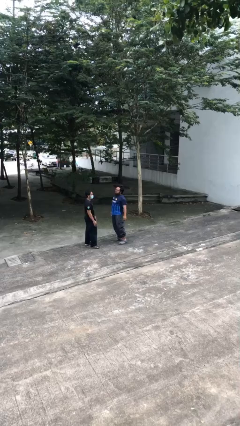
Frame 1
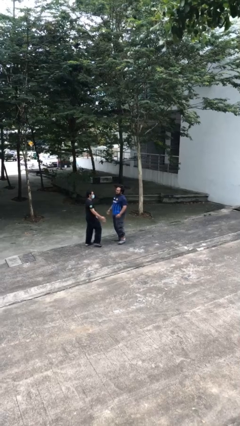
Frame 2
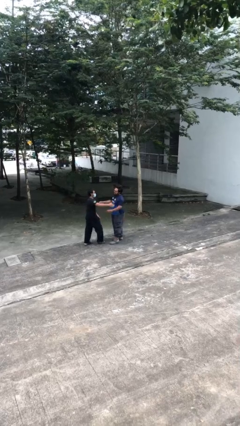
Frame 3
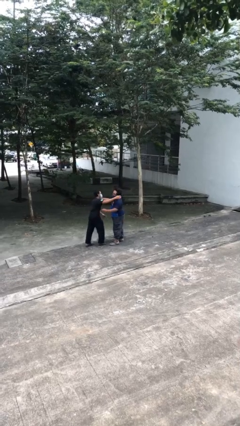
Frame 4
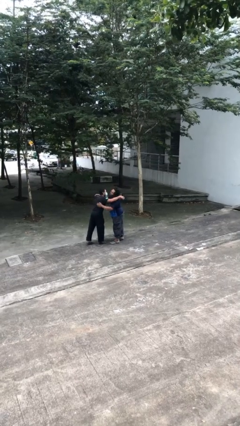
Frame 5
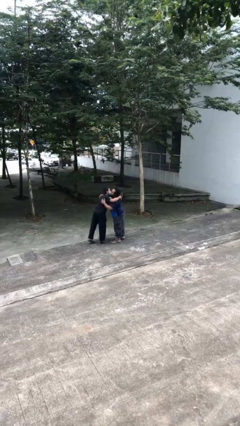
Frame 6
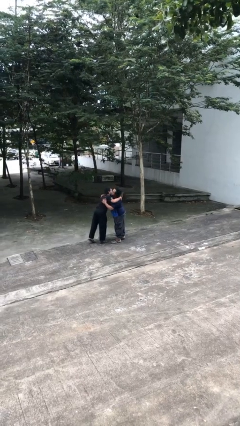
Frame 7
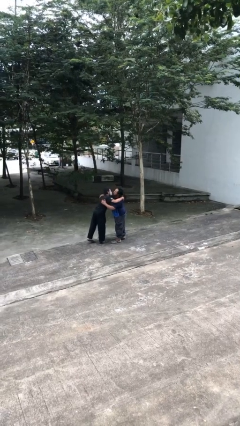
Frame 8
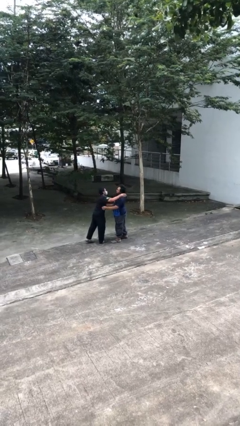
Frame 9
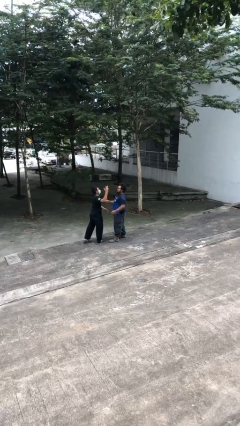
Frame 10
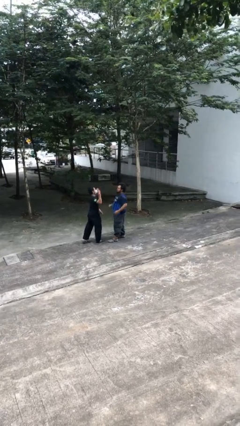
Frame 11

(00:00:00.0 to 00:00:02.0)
person embraces person

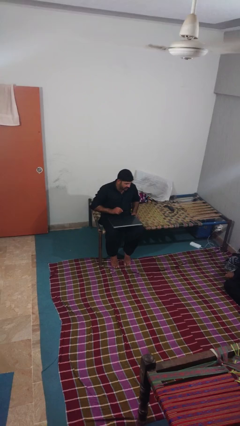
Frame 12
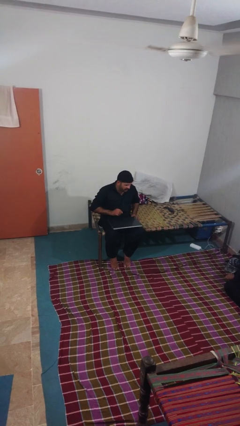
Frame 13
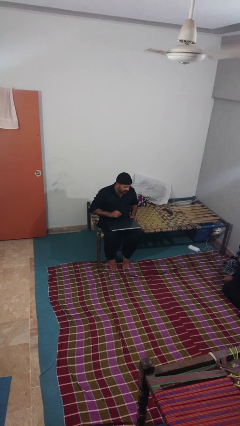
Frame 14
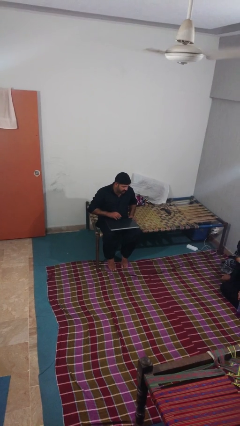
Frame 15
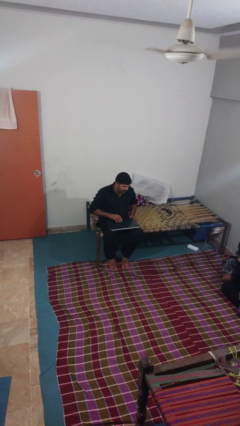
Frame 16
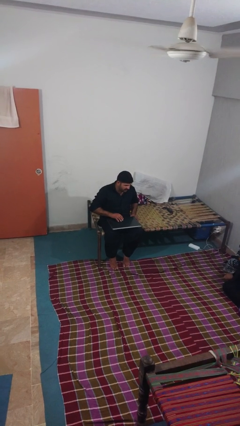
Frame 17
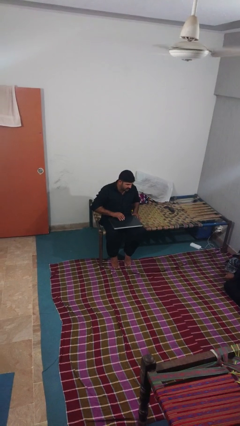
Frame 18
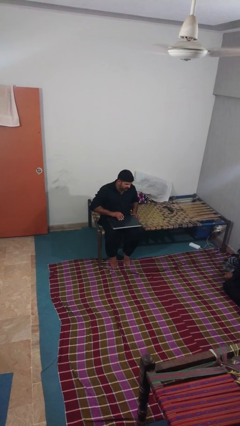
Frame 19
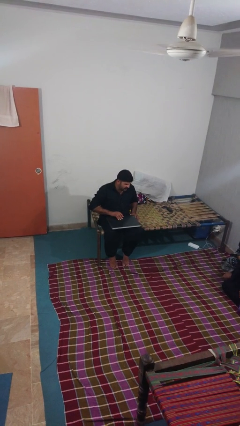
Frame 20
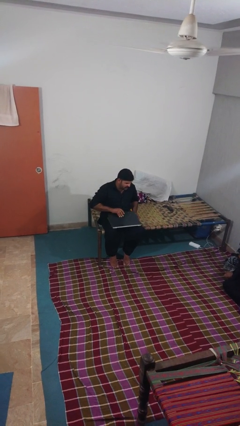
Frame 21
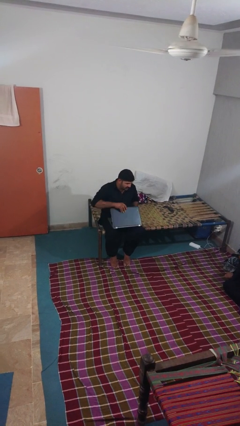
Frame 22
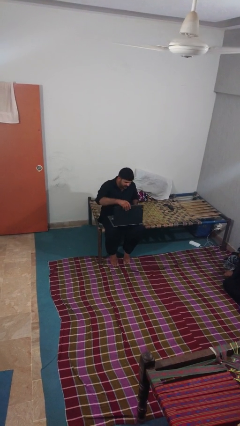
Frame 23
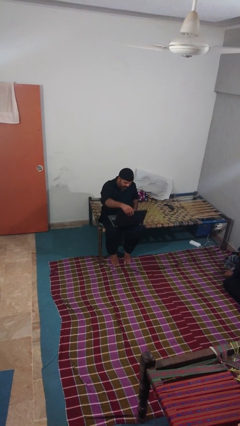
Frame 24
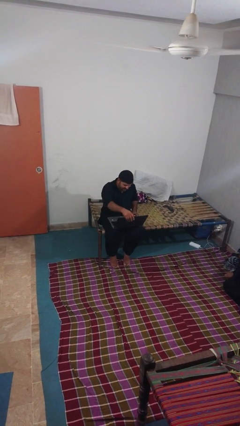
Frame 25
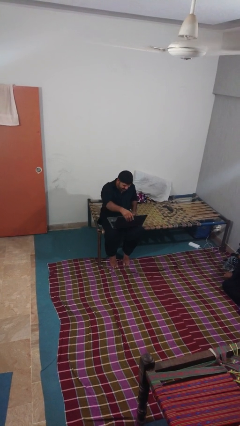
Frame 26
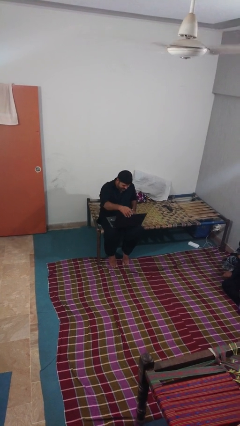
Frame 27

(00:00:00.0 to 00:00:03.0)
person opens laptop

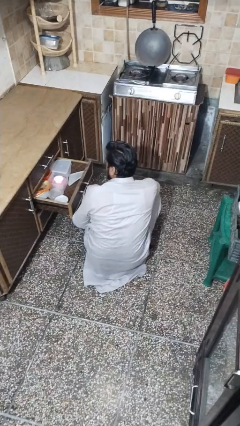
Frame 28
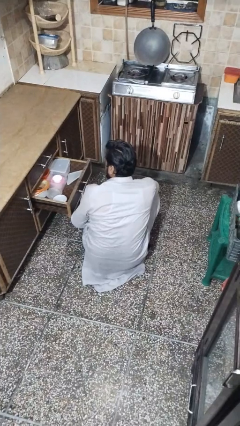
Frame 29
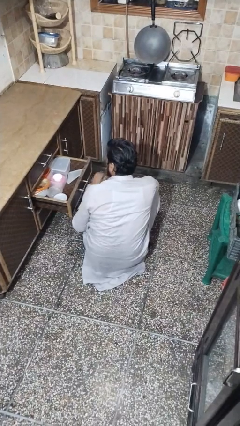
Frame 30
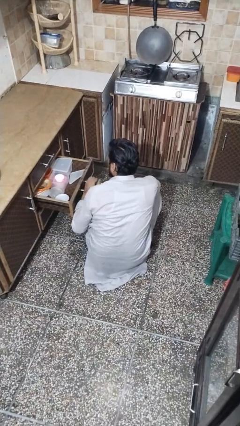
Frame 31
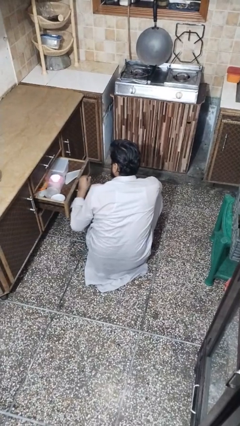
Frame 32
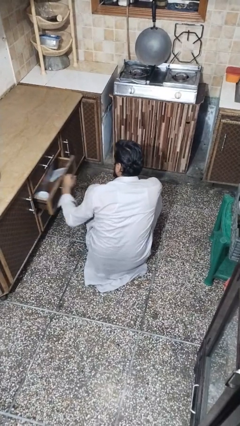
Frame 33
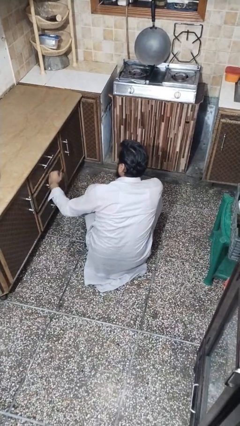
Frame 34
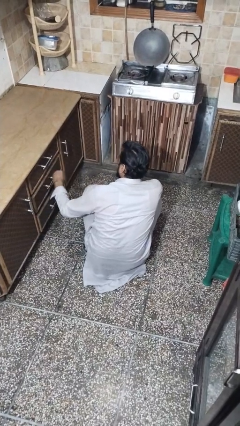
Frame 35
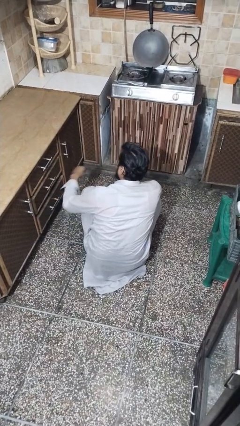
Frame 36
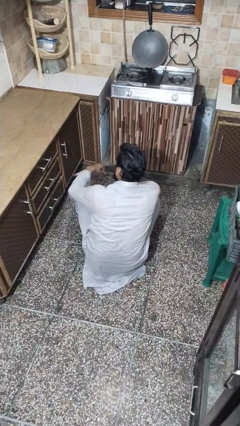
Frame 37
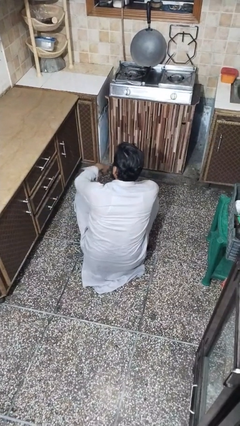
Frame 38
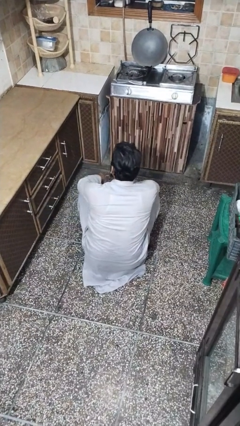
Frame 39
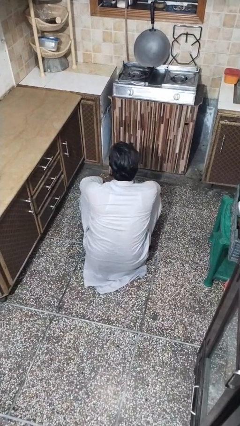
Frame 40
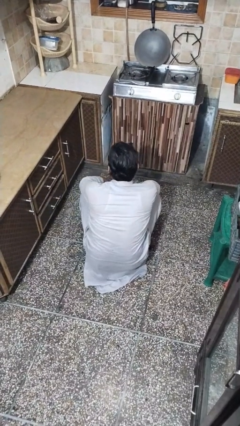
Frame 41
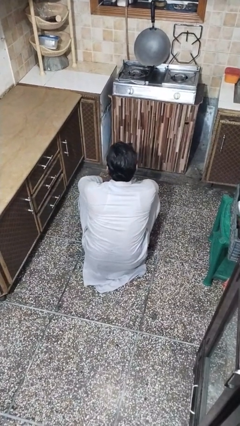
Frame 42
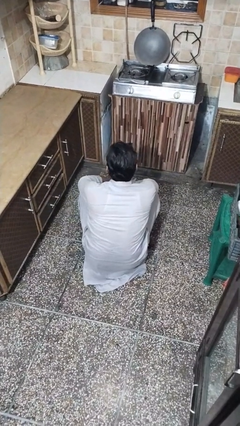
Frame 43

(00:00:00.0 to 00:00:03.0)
person closes kitchen drawer

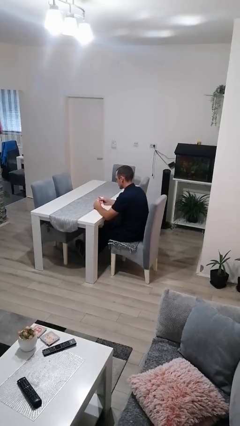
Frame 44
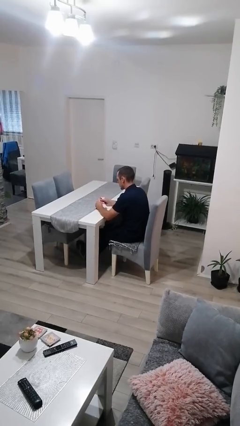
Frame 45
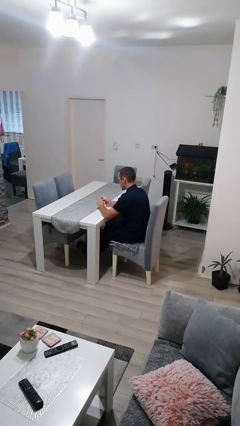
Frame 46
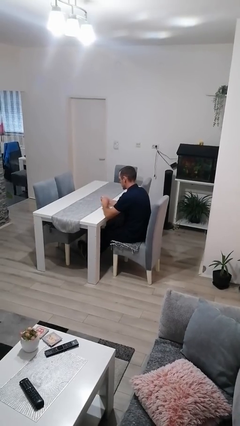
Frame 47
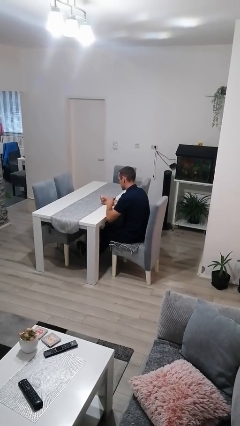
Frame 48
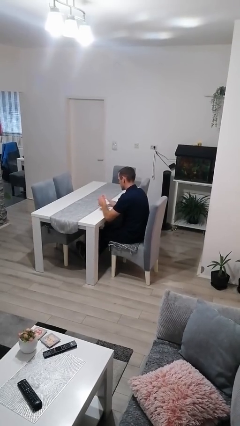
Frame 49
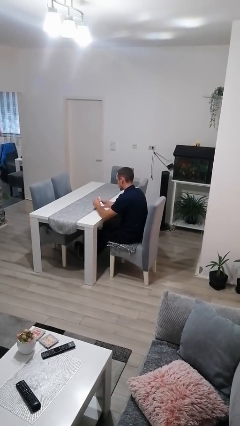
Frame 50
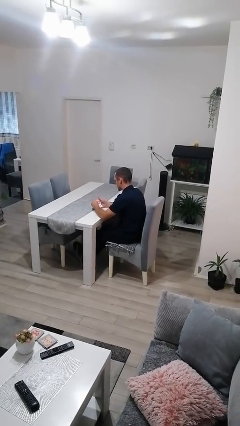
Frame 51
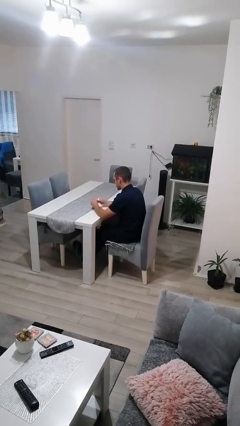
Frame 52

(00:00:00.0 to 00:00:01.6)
person tears paper

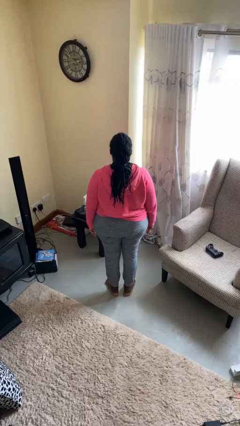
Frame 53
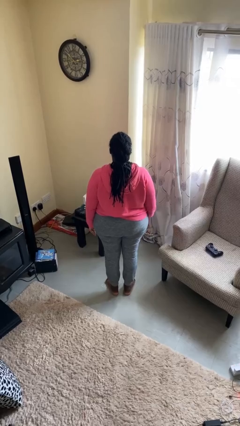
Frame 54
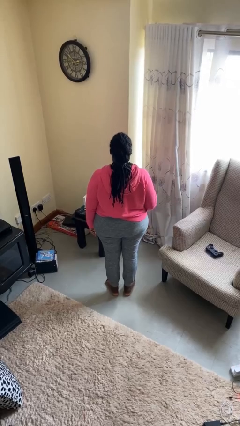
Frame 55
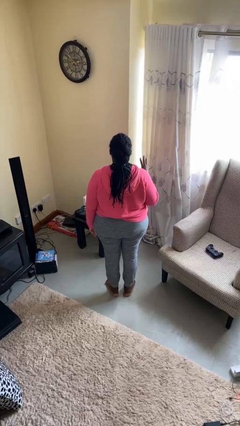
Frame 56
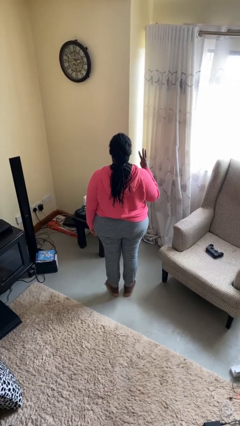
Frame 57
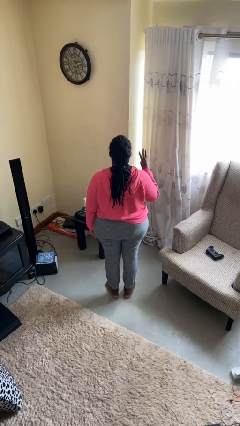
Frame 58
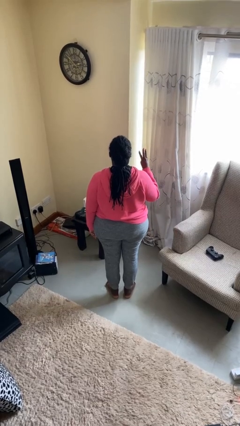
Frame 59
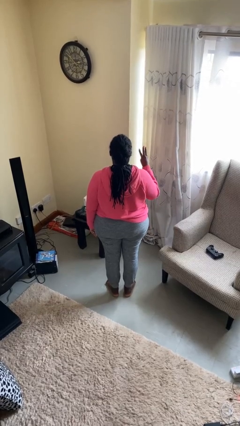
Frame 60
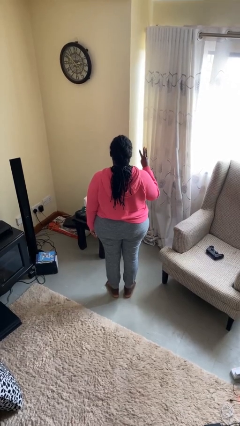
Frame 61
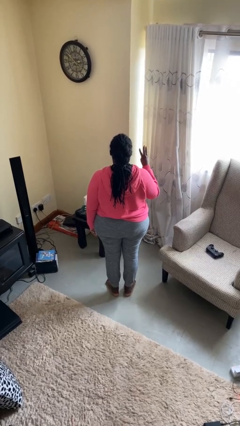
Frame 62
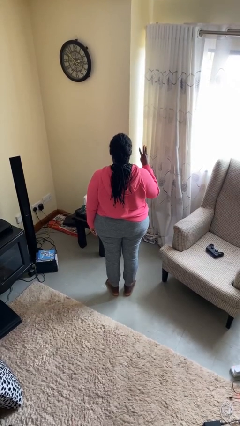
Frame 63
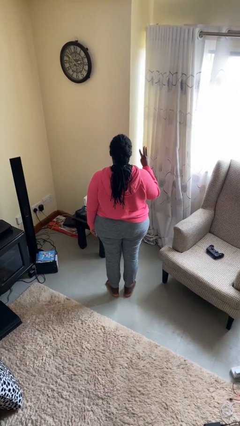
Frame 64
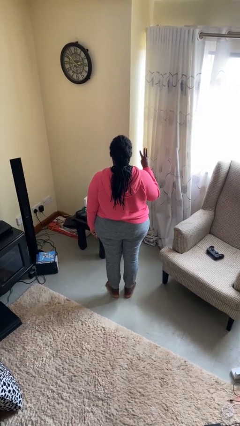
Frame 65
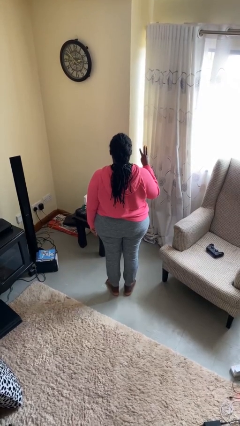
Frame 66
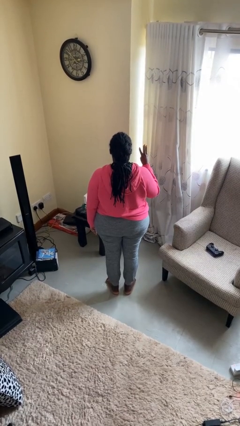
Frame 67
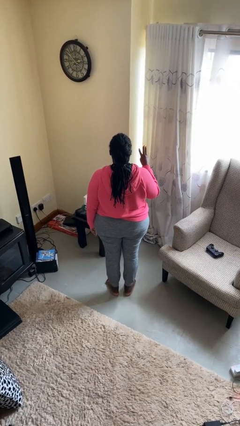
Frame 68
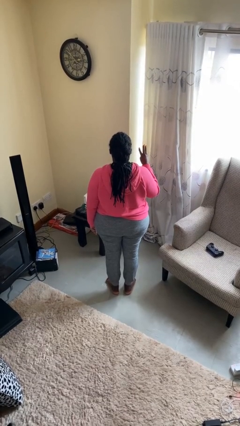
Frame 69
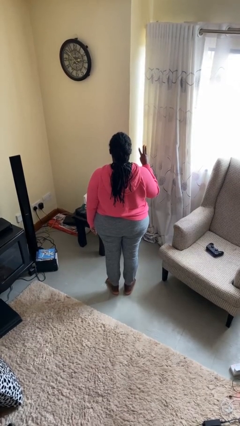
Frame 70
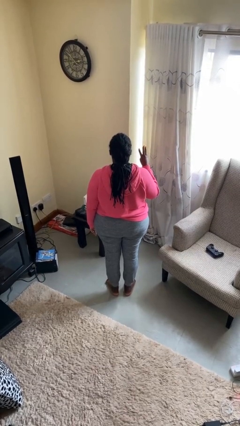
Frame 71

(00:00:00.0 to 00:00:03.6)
person gestures number three

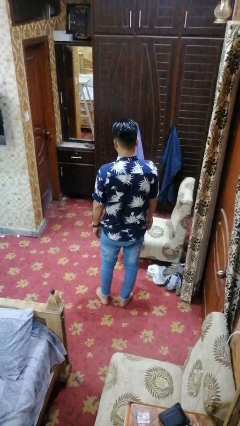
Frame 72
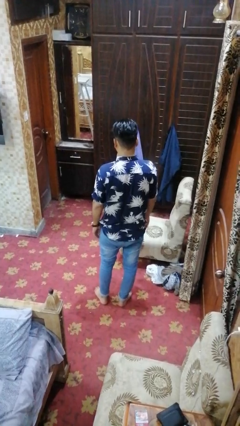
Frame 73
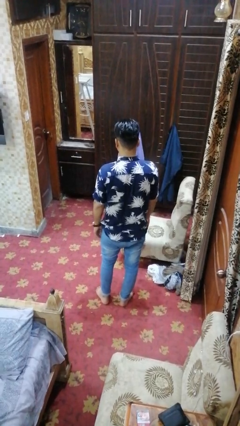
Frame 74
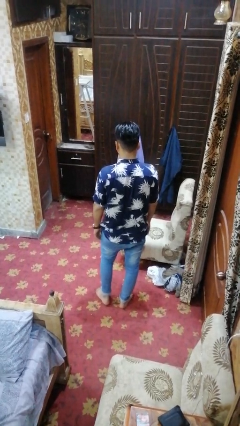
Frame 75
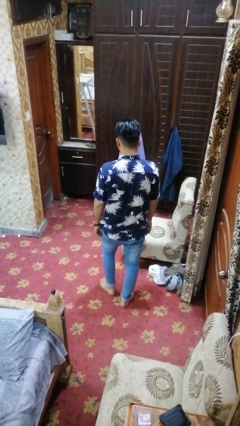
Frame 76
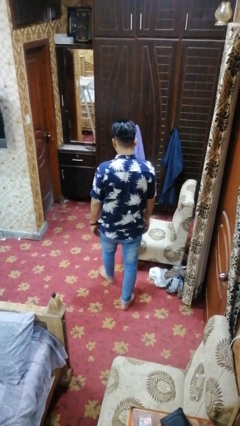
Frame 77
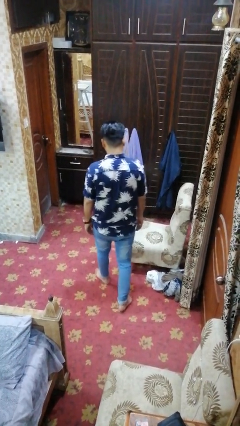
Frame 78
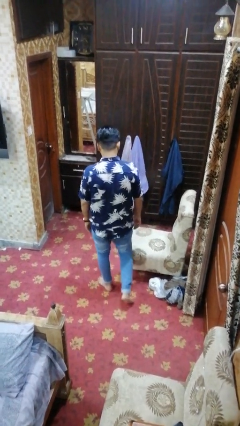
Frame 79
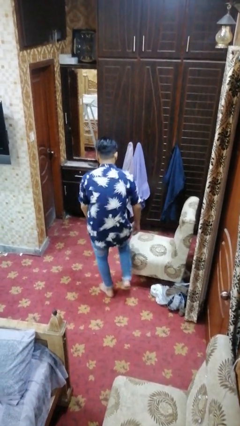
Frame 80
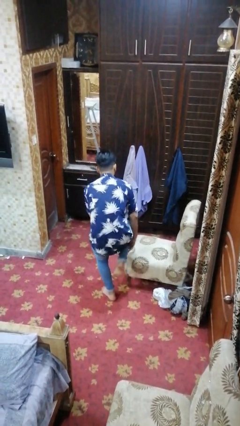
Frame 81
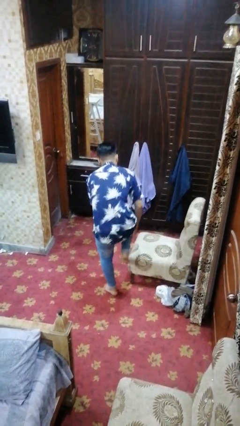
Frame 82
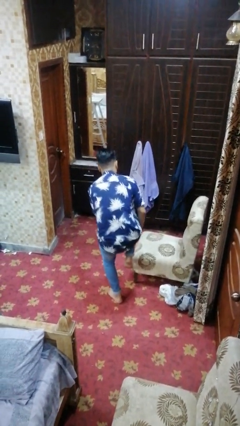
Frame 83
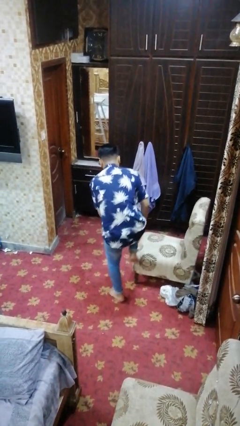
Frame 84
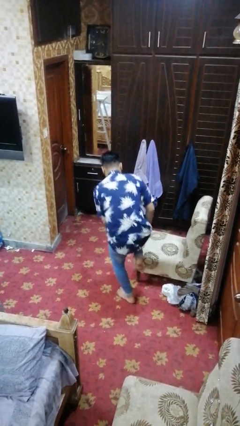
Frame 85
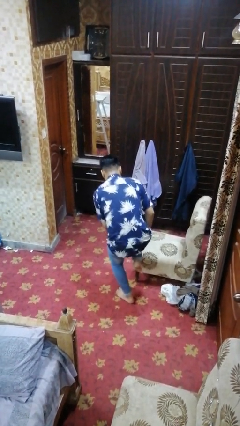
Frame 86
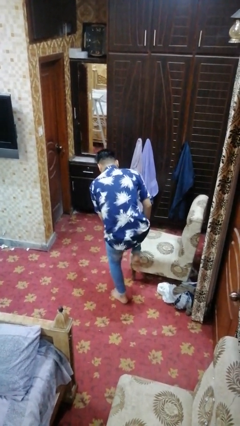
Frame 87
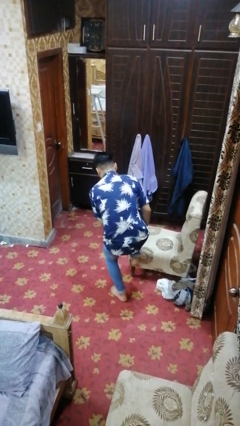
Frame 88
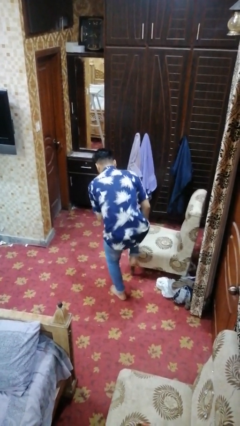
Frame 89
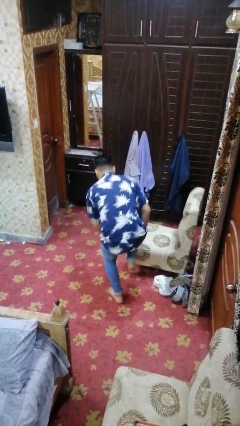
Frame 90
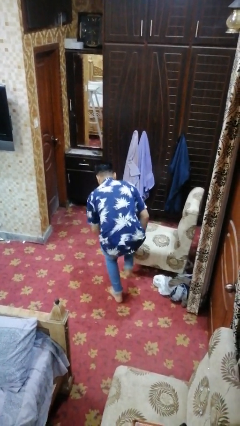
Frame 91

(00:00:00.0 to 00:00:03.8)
person trips on object on floor

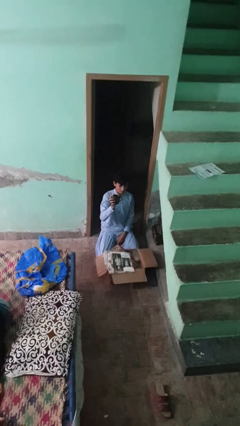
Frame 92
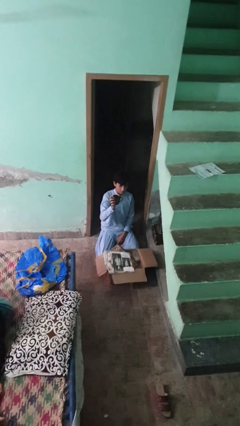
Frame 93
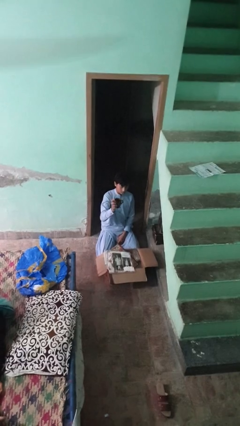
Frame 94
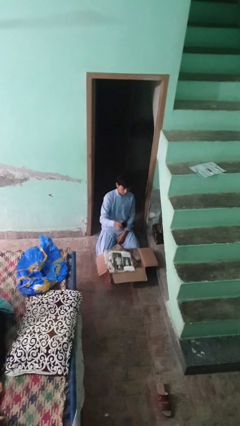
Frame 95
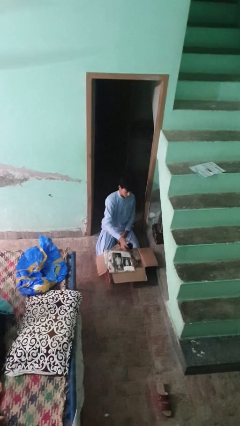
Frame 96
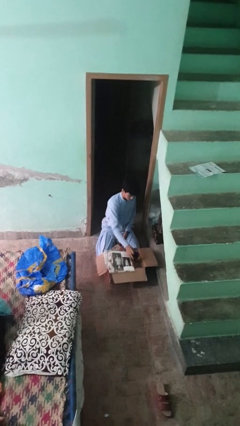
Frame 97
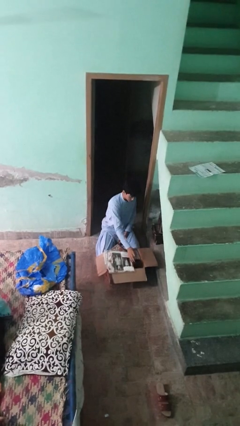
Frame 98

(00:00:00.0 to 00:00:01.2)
person puts object into box
